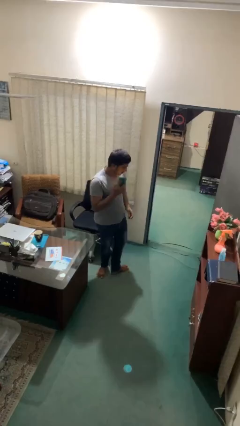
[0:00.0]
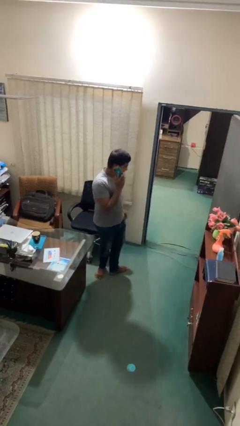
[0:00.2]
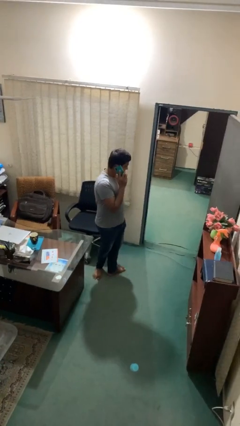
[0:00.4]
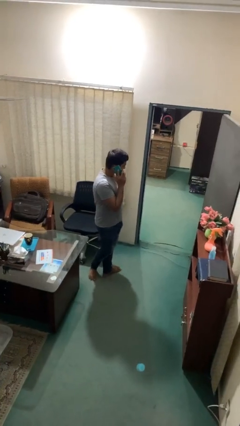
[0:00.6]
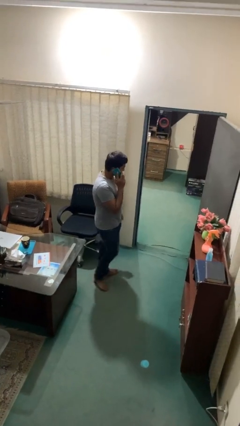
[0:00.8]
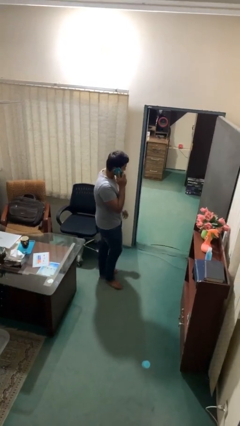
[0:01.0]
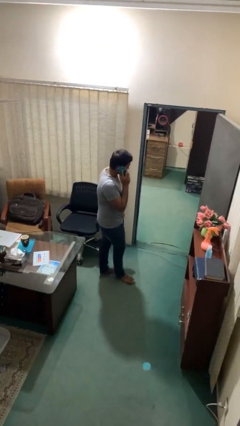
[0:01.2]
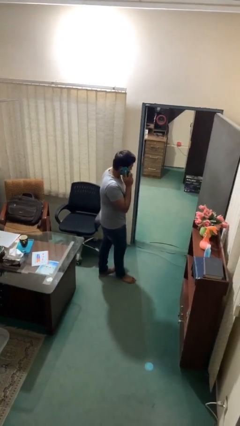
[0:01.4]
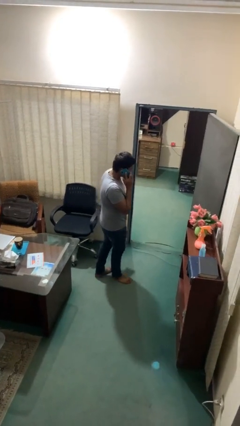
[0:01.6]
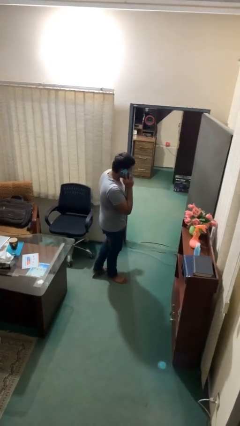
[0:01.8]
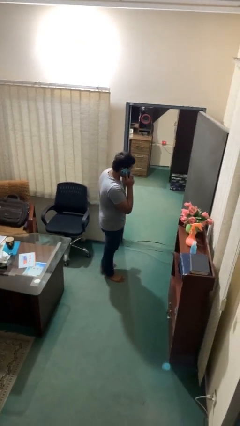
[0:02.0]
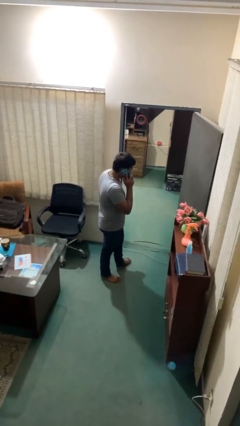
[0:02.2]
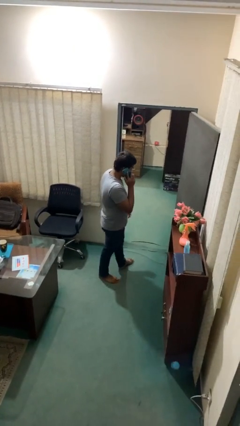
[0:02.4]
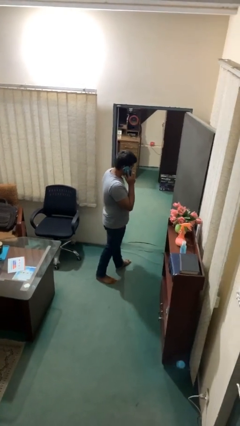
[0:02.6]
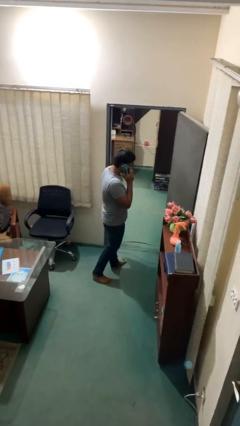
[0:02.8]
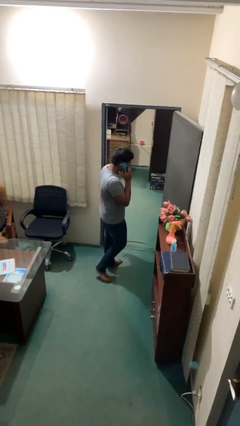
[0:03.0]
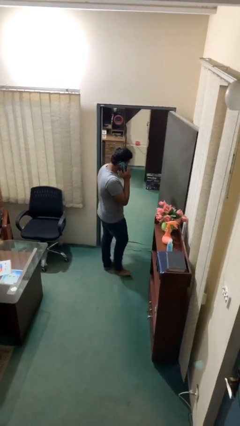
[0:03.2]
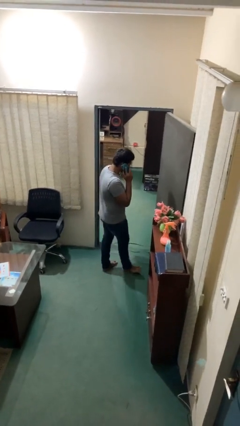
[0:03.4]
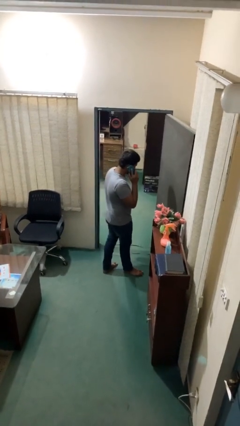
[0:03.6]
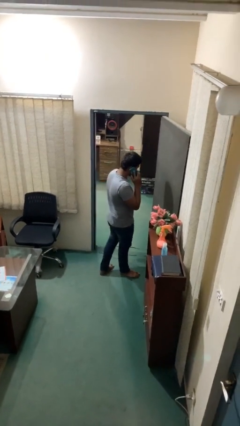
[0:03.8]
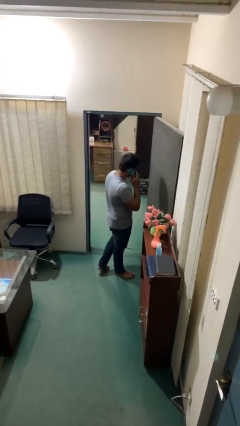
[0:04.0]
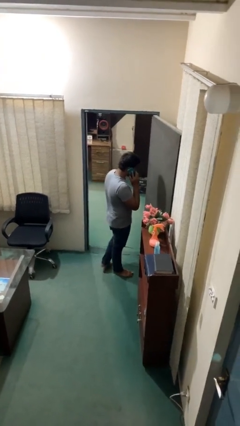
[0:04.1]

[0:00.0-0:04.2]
person talks on phone

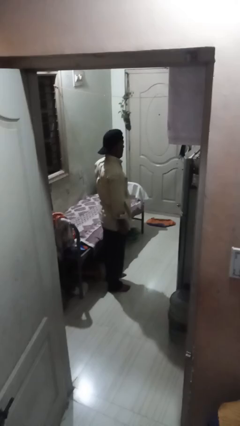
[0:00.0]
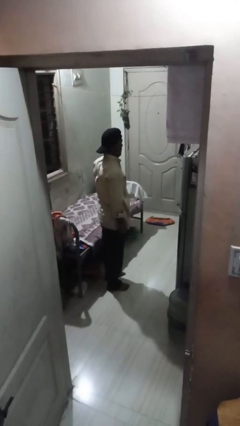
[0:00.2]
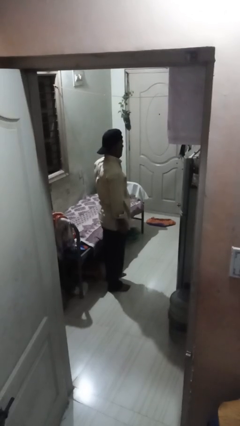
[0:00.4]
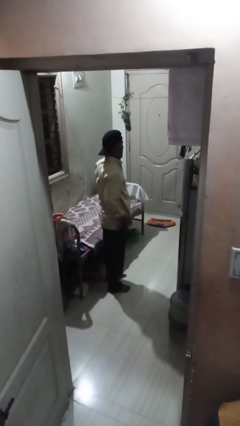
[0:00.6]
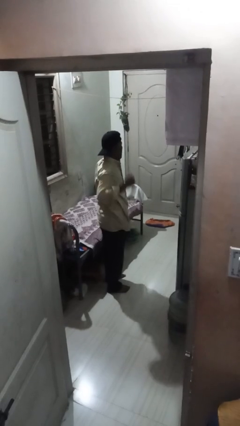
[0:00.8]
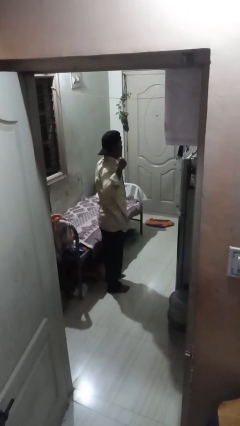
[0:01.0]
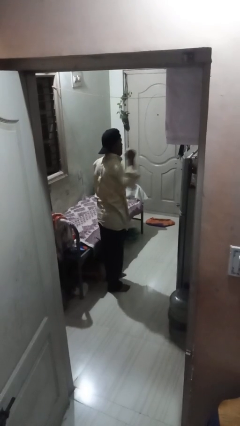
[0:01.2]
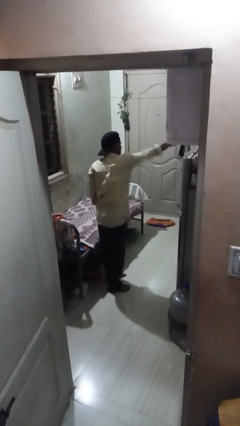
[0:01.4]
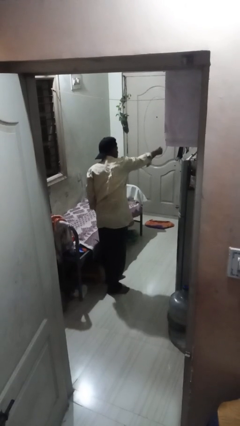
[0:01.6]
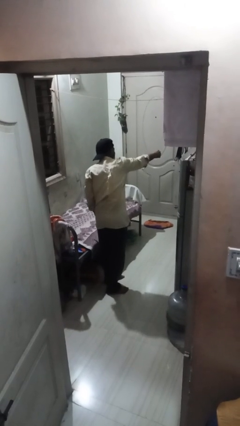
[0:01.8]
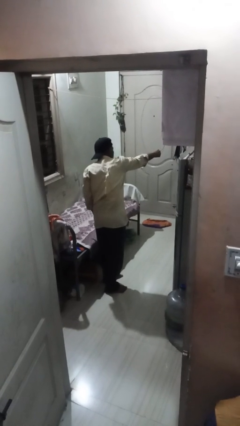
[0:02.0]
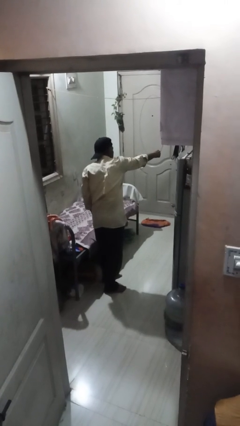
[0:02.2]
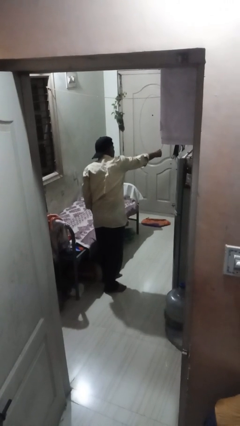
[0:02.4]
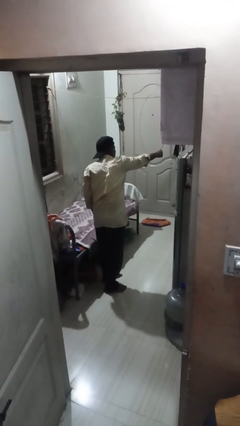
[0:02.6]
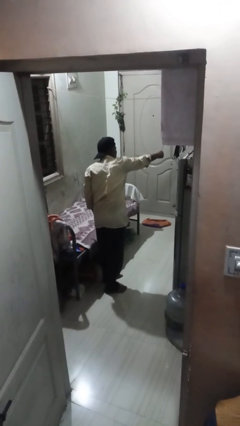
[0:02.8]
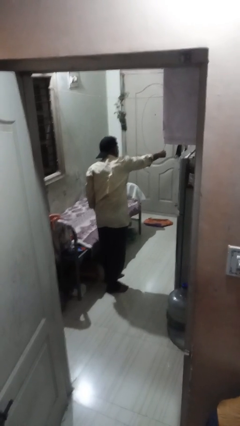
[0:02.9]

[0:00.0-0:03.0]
person punches

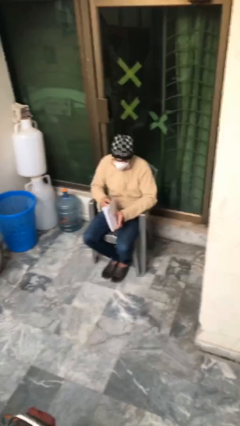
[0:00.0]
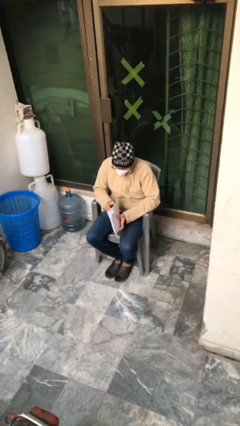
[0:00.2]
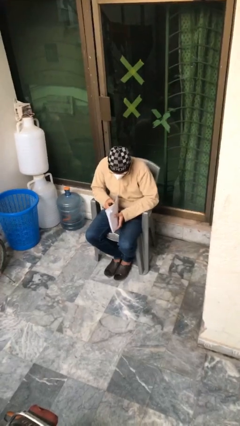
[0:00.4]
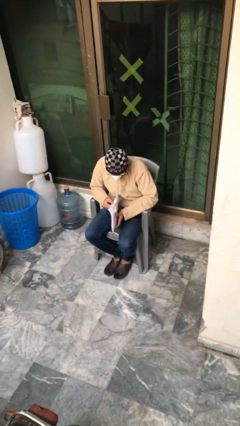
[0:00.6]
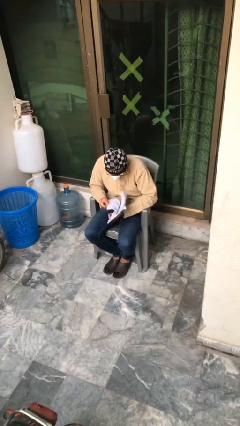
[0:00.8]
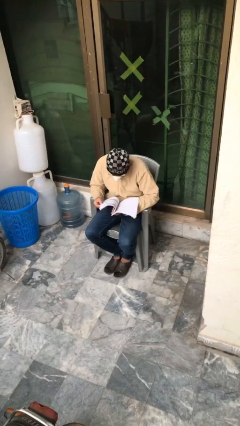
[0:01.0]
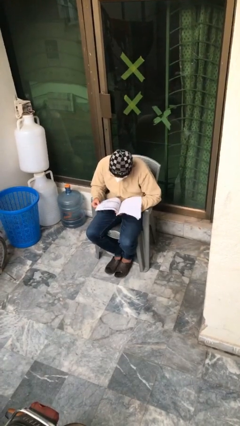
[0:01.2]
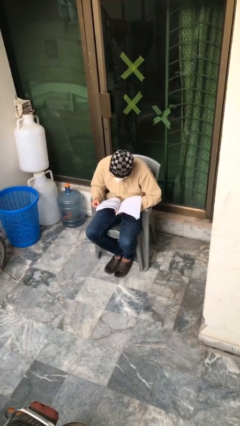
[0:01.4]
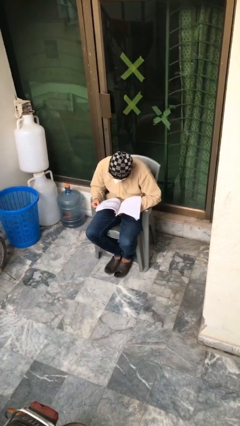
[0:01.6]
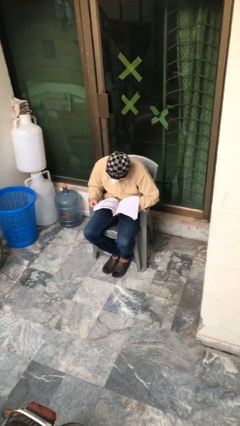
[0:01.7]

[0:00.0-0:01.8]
person reads document

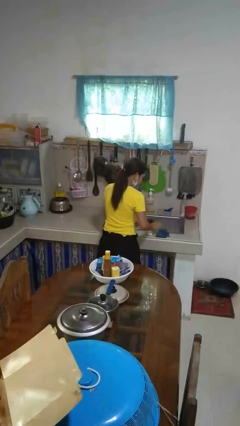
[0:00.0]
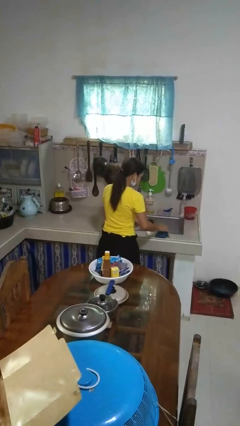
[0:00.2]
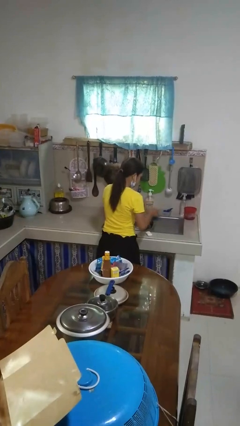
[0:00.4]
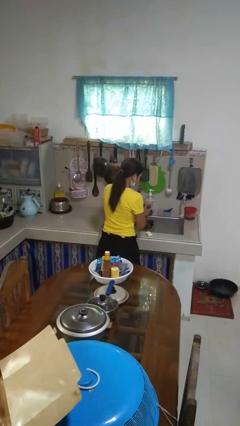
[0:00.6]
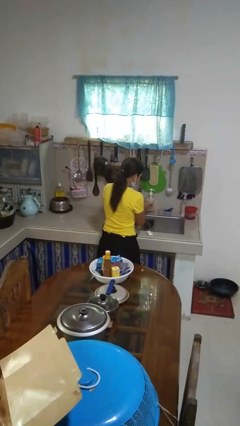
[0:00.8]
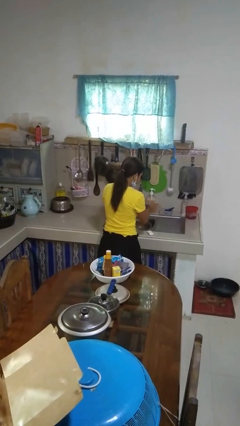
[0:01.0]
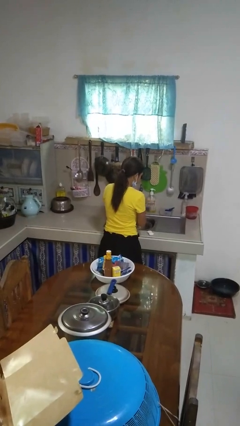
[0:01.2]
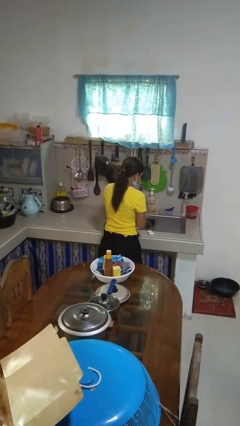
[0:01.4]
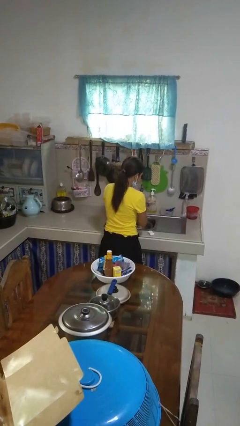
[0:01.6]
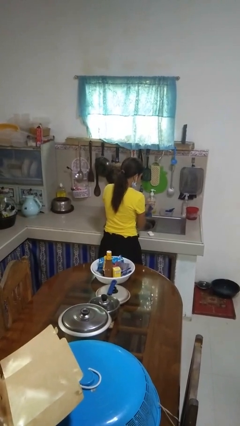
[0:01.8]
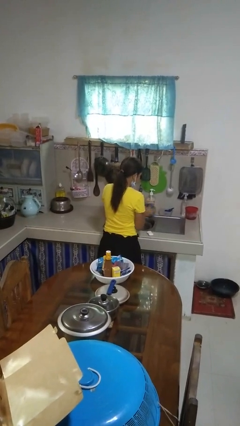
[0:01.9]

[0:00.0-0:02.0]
person dries hands with towel

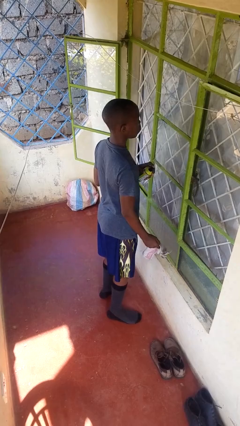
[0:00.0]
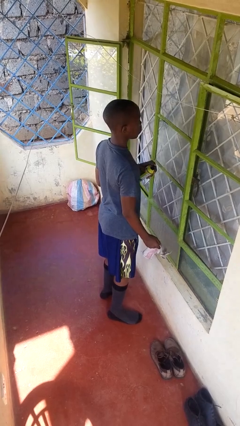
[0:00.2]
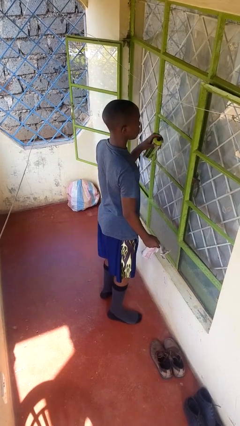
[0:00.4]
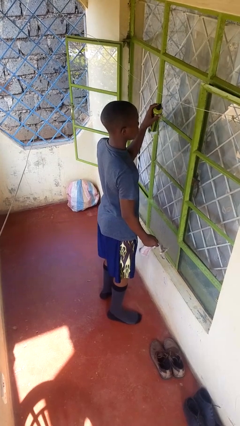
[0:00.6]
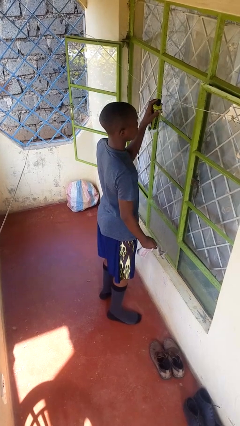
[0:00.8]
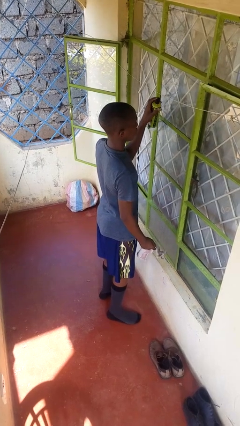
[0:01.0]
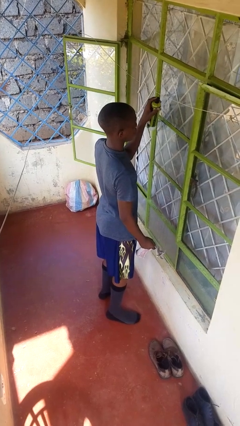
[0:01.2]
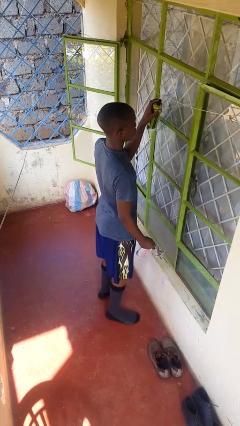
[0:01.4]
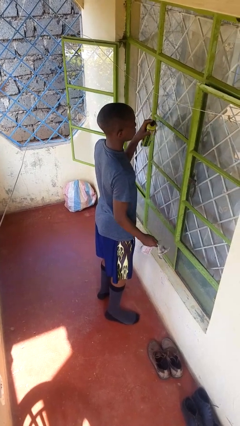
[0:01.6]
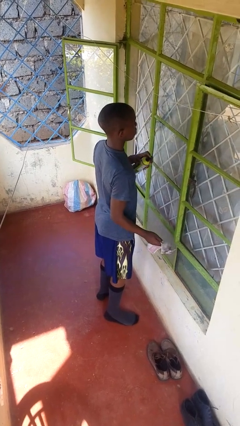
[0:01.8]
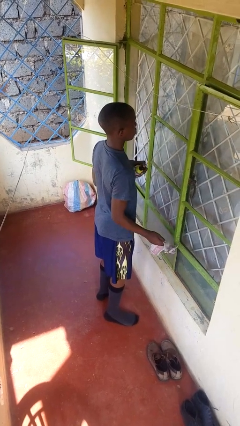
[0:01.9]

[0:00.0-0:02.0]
person sprays from bottle

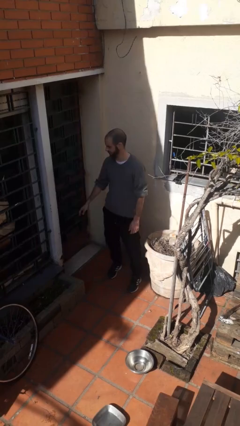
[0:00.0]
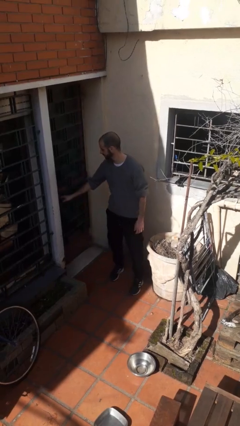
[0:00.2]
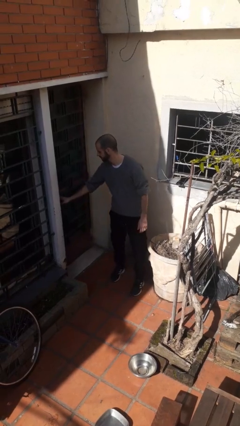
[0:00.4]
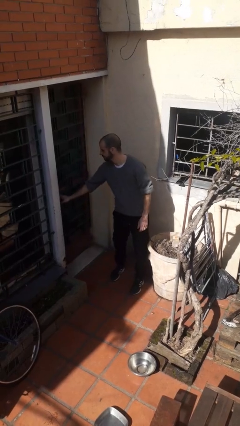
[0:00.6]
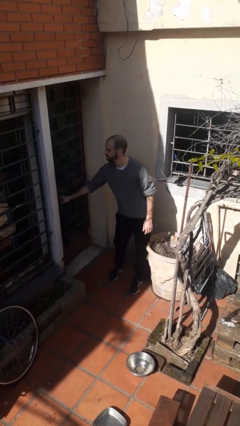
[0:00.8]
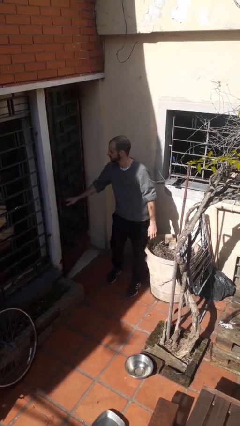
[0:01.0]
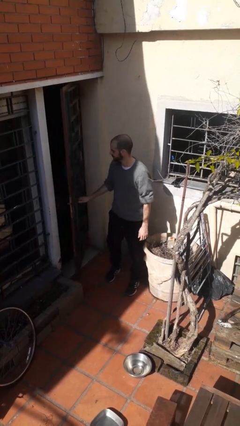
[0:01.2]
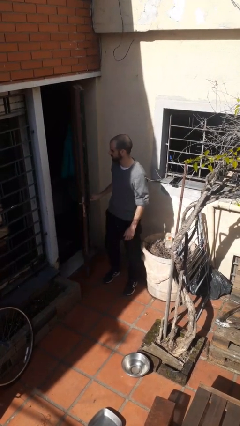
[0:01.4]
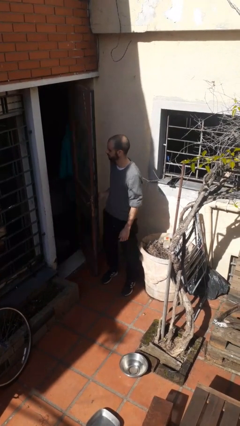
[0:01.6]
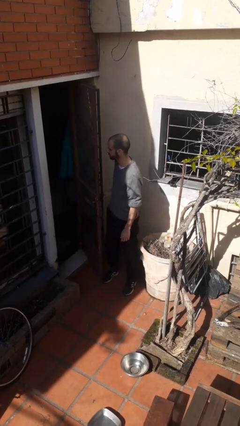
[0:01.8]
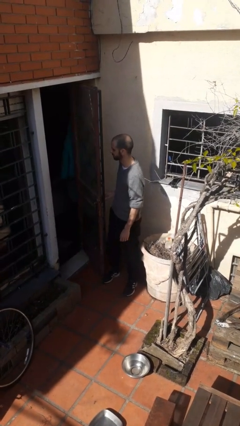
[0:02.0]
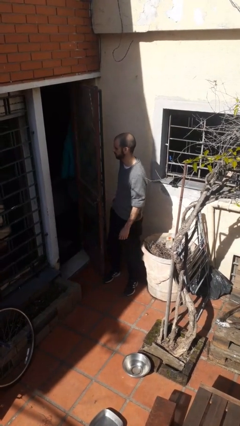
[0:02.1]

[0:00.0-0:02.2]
person opens facility door

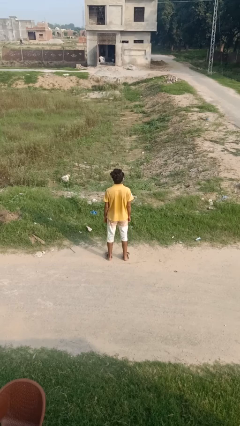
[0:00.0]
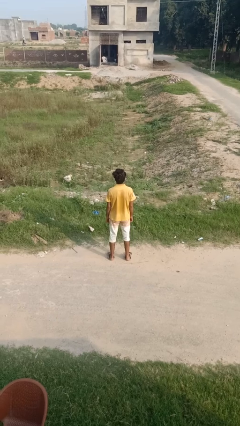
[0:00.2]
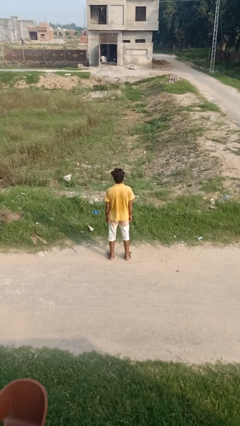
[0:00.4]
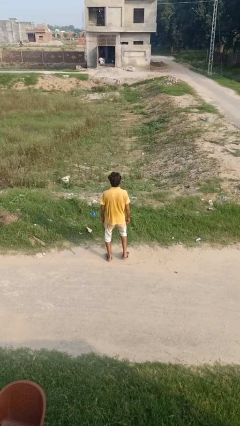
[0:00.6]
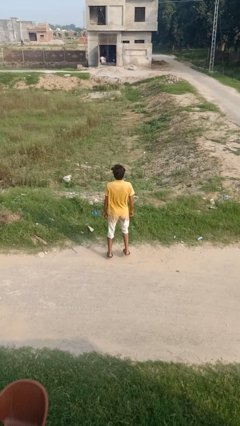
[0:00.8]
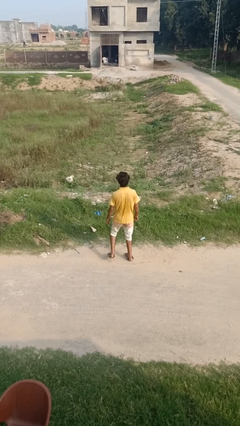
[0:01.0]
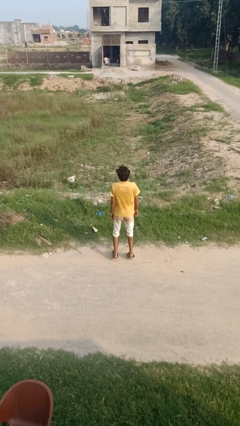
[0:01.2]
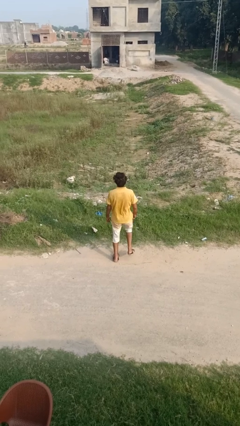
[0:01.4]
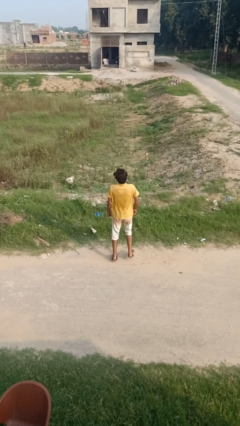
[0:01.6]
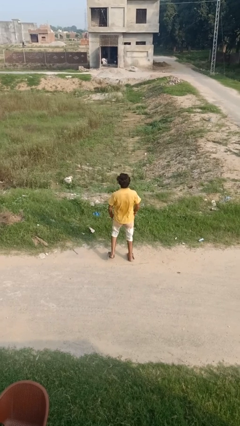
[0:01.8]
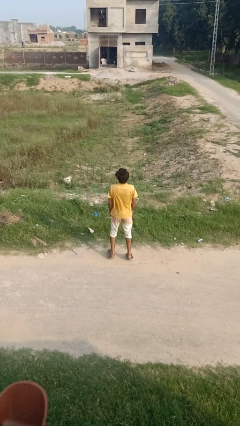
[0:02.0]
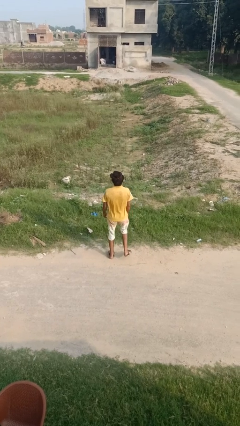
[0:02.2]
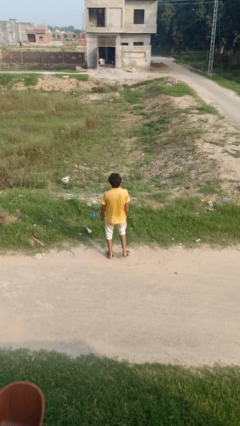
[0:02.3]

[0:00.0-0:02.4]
person dances in place
